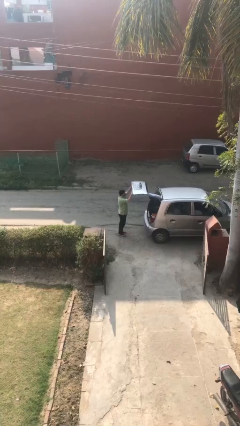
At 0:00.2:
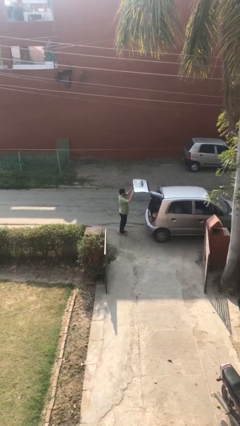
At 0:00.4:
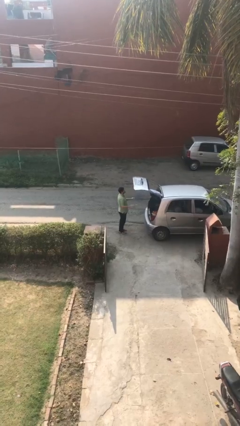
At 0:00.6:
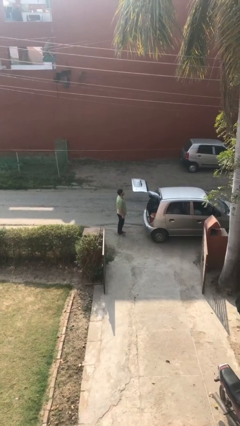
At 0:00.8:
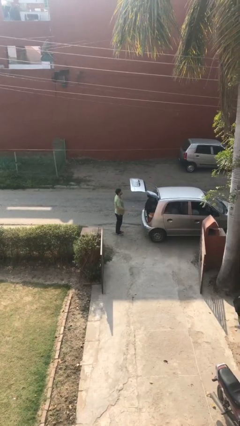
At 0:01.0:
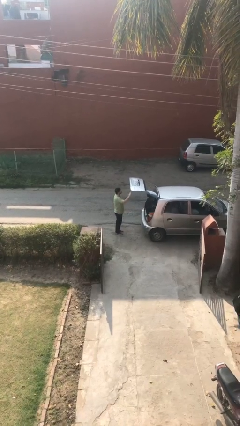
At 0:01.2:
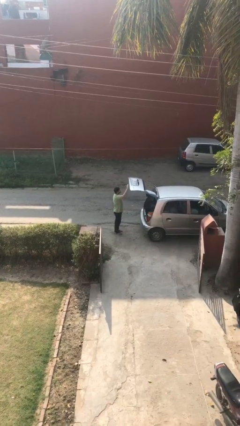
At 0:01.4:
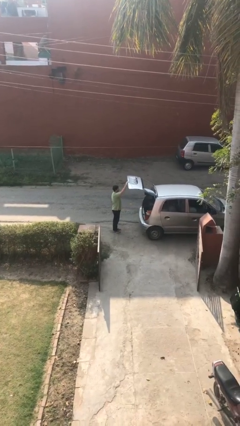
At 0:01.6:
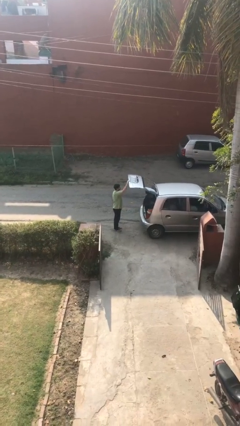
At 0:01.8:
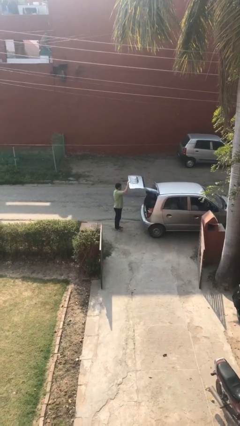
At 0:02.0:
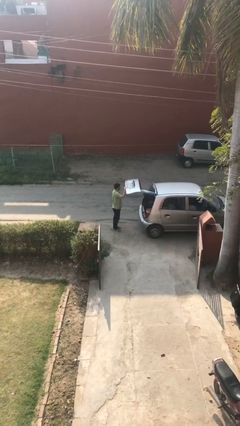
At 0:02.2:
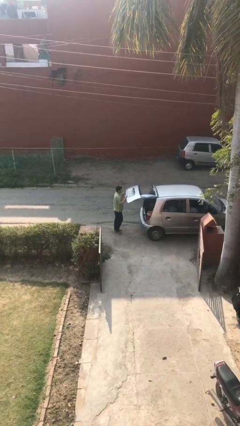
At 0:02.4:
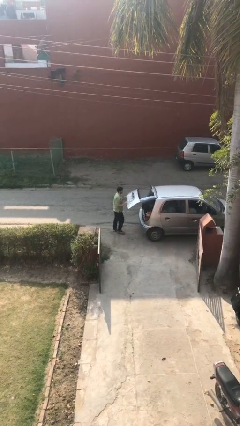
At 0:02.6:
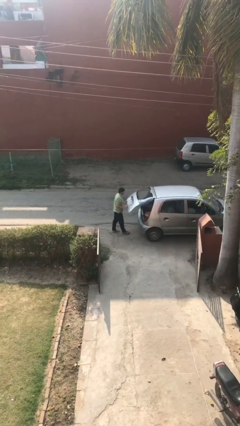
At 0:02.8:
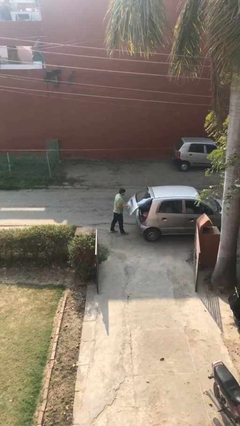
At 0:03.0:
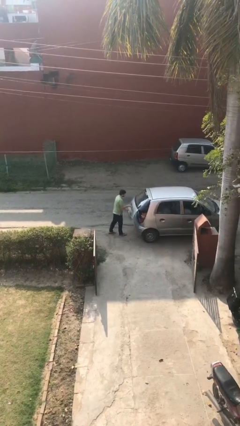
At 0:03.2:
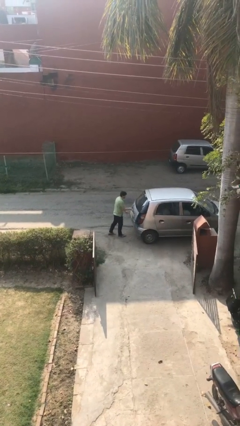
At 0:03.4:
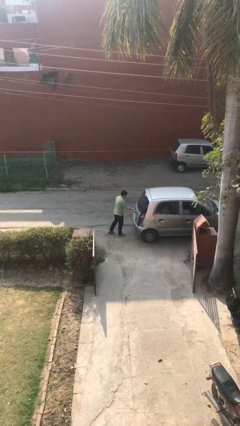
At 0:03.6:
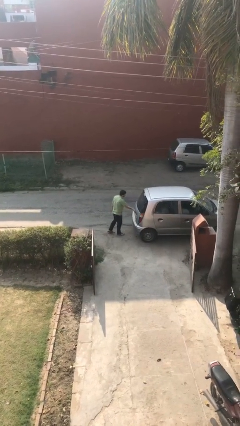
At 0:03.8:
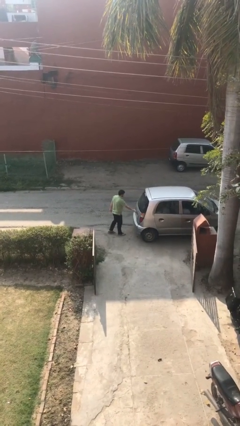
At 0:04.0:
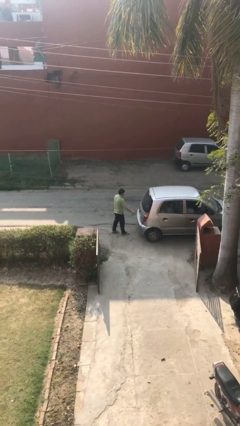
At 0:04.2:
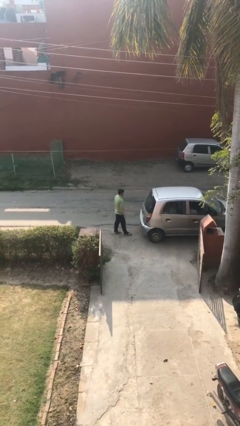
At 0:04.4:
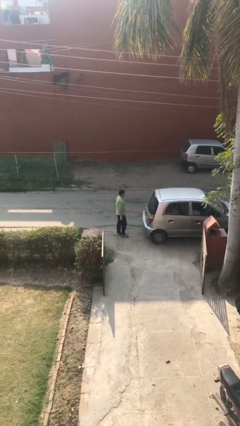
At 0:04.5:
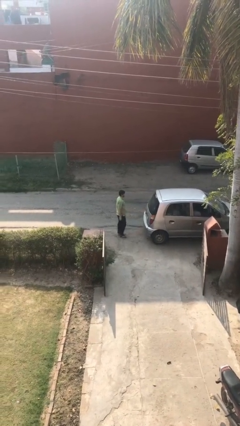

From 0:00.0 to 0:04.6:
person closes car trunk

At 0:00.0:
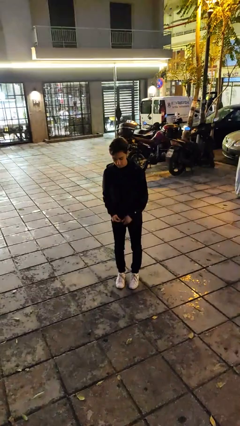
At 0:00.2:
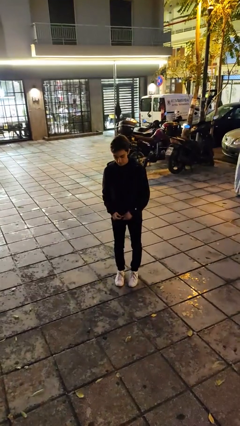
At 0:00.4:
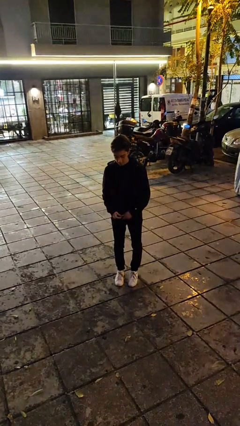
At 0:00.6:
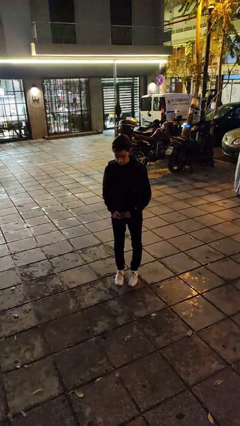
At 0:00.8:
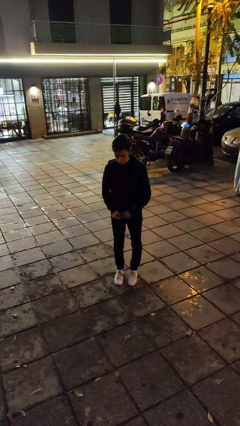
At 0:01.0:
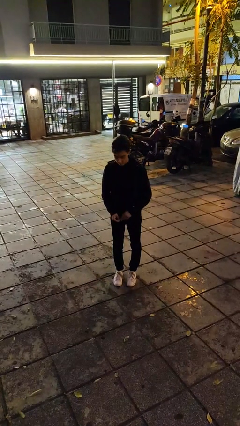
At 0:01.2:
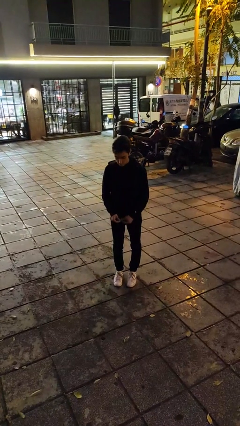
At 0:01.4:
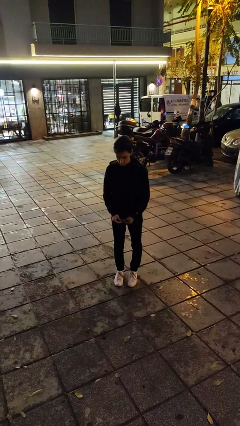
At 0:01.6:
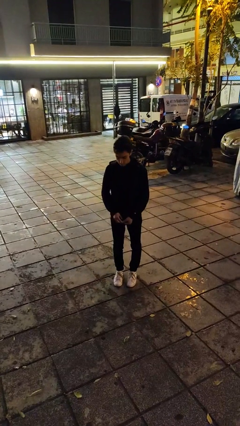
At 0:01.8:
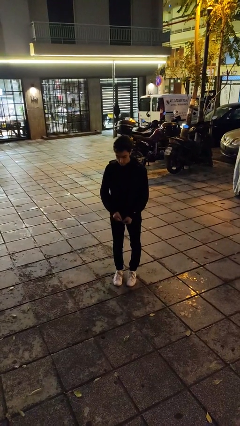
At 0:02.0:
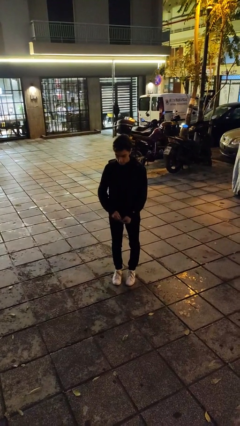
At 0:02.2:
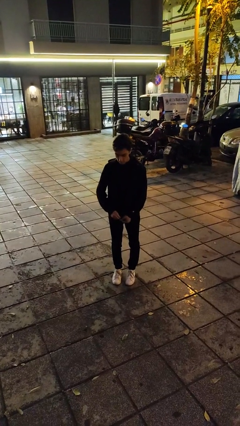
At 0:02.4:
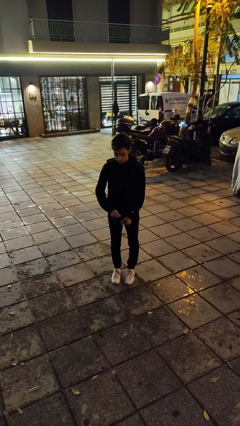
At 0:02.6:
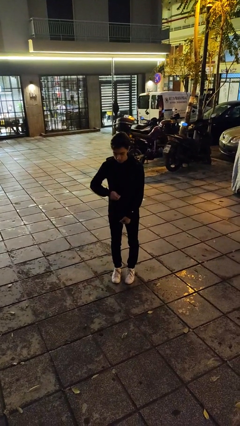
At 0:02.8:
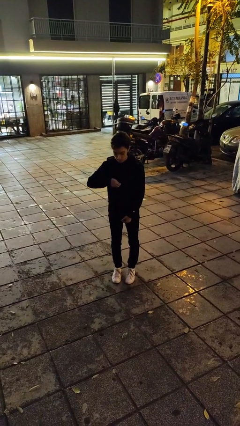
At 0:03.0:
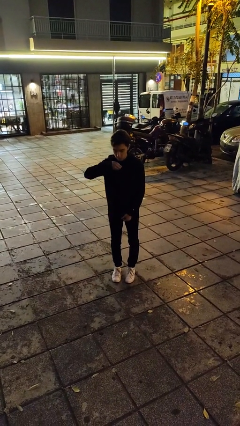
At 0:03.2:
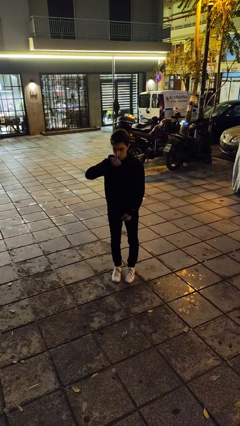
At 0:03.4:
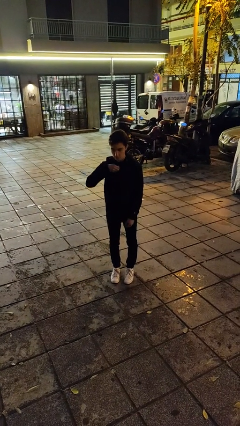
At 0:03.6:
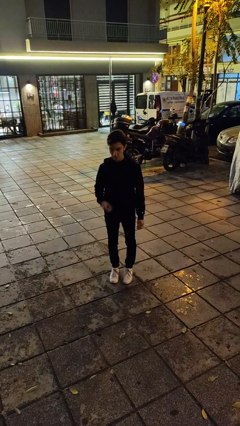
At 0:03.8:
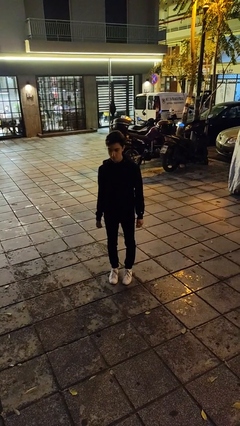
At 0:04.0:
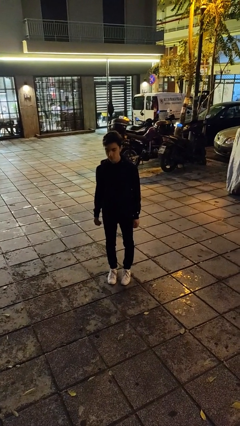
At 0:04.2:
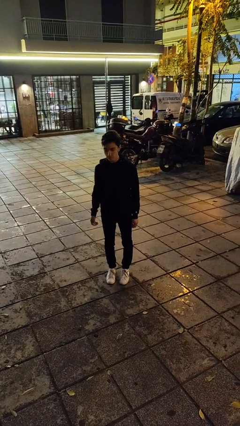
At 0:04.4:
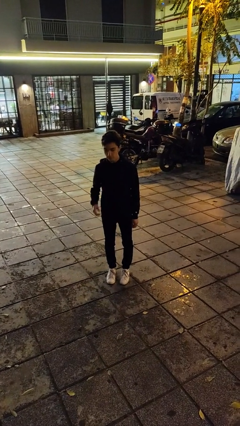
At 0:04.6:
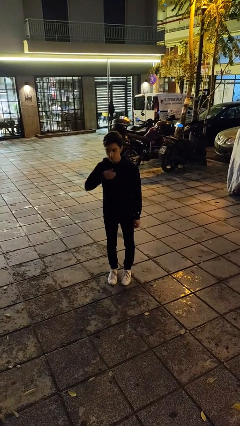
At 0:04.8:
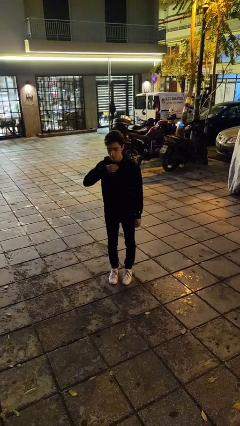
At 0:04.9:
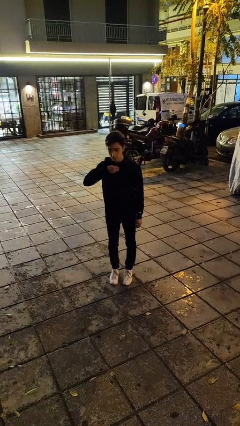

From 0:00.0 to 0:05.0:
person zips up jacket

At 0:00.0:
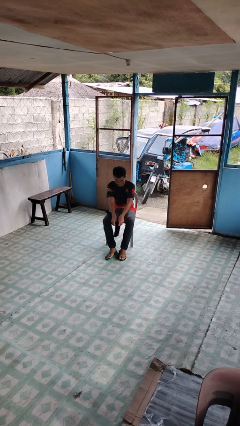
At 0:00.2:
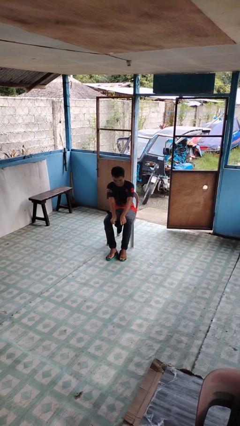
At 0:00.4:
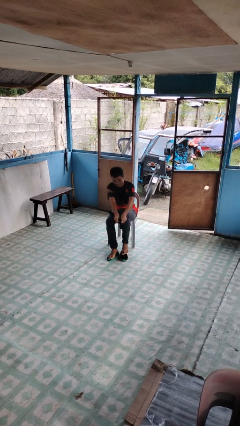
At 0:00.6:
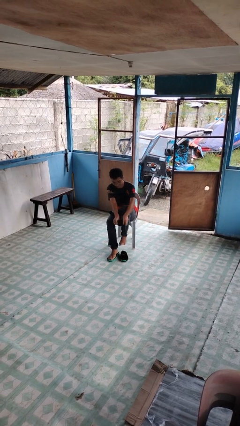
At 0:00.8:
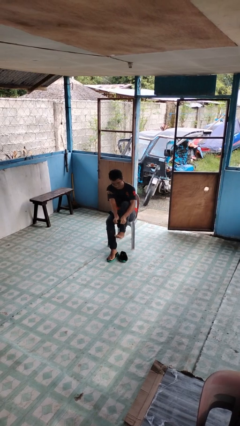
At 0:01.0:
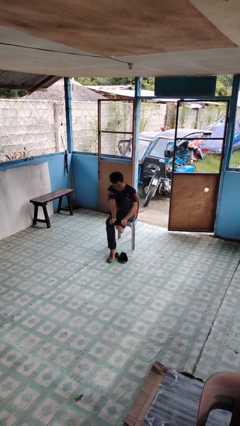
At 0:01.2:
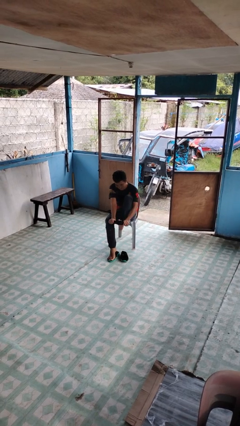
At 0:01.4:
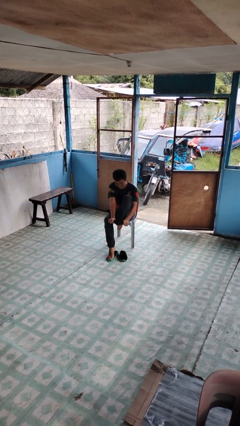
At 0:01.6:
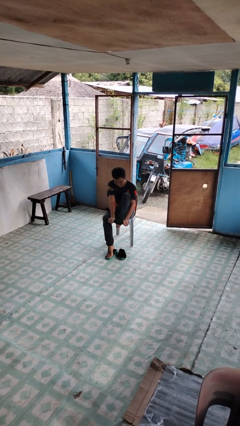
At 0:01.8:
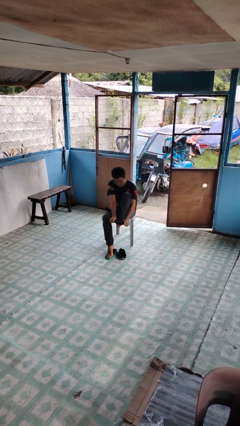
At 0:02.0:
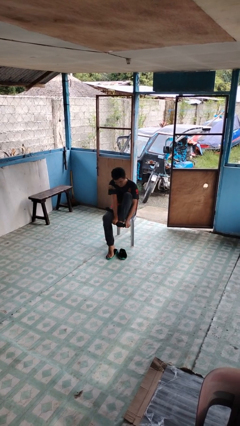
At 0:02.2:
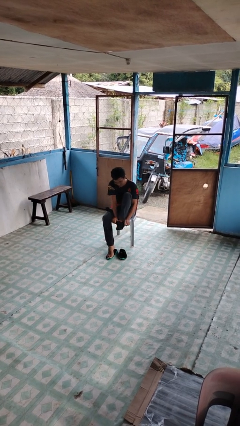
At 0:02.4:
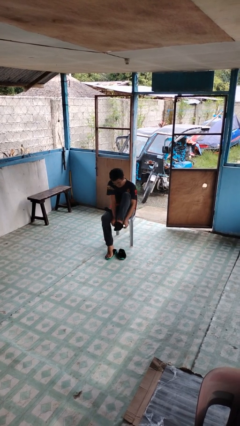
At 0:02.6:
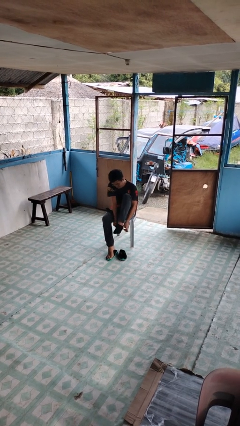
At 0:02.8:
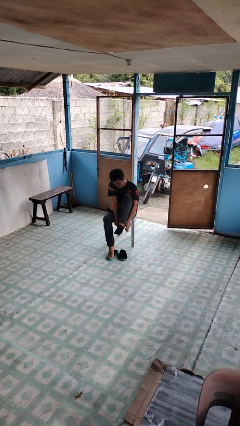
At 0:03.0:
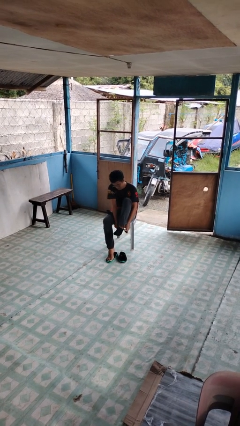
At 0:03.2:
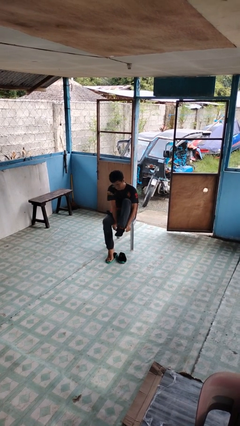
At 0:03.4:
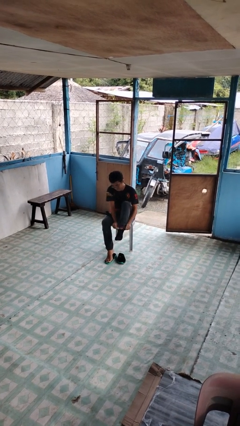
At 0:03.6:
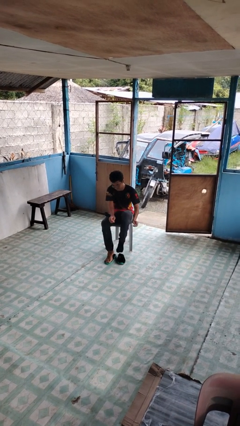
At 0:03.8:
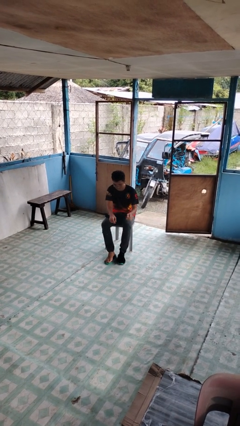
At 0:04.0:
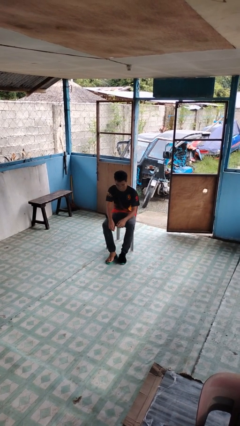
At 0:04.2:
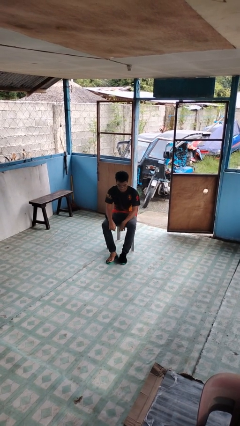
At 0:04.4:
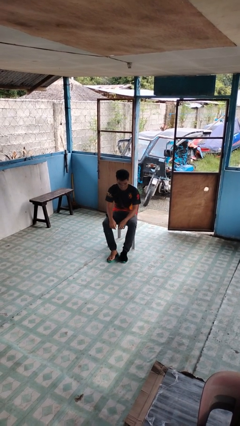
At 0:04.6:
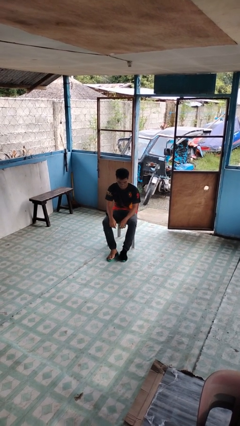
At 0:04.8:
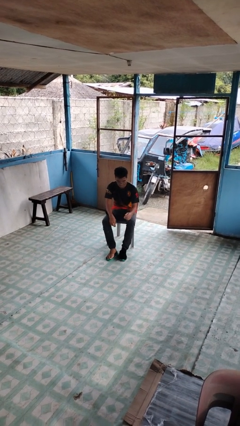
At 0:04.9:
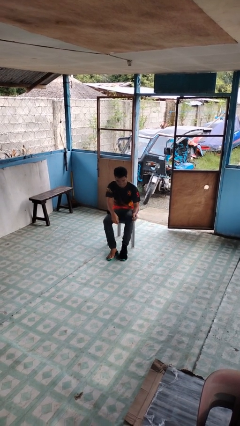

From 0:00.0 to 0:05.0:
person puts on socks

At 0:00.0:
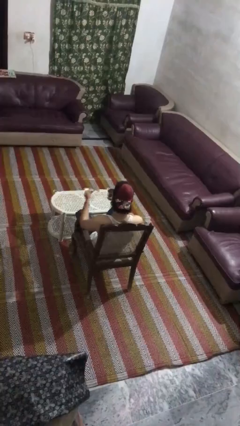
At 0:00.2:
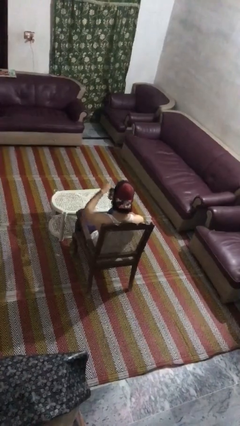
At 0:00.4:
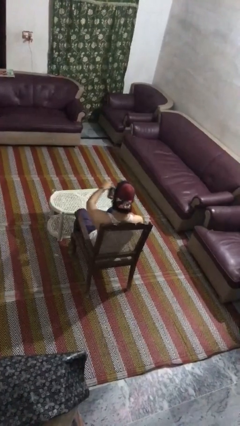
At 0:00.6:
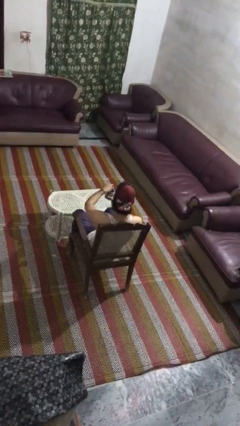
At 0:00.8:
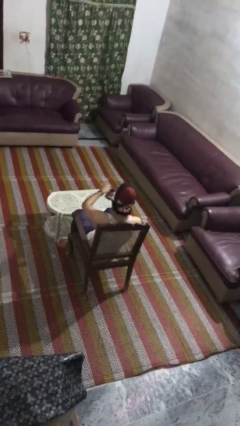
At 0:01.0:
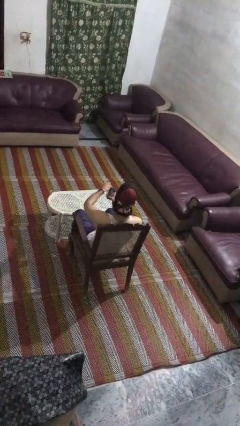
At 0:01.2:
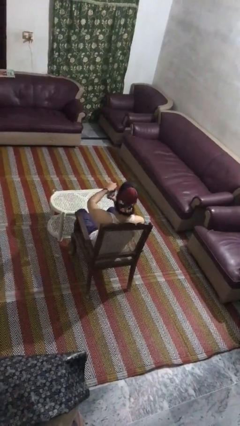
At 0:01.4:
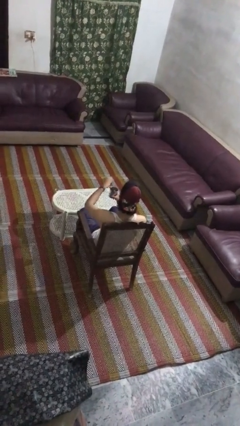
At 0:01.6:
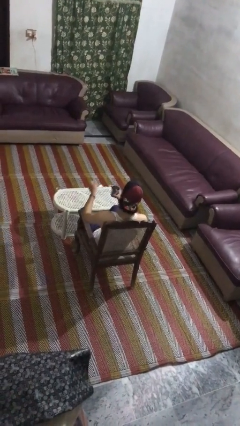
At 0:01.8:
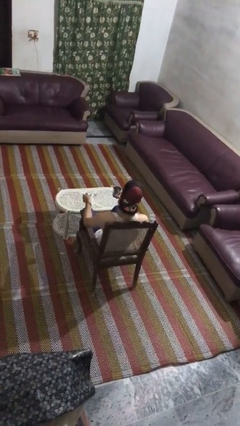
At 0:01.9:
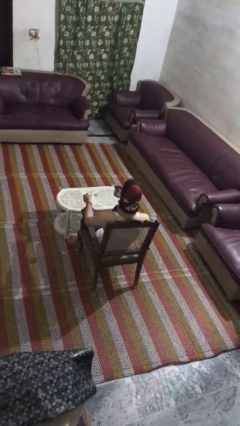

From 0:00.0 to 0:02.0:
person stirs mug

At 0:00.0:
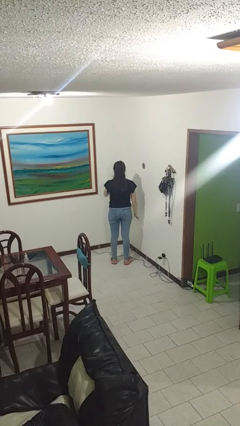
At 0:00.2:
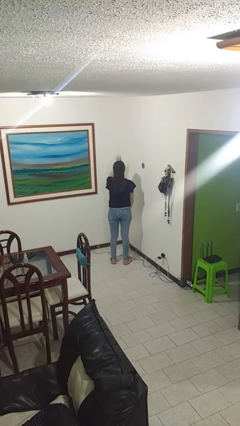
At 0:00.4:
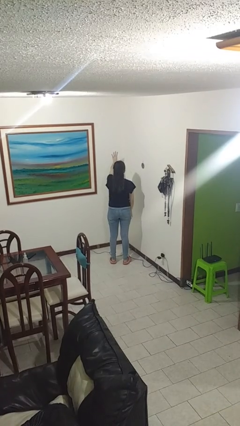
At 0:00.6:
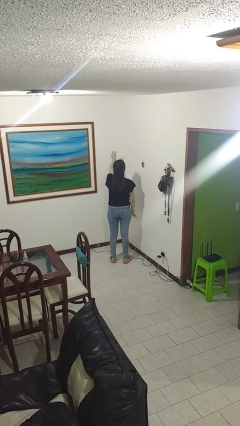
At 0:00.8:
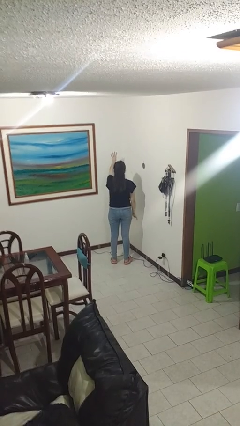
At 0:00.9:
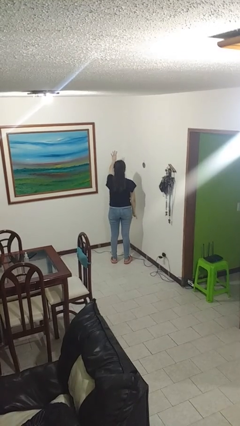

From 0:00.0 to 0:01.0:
person gestures number four
